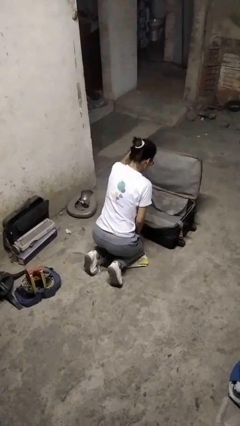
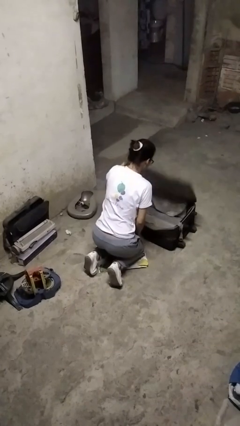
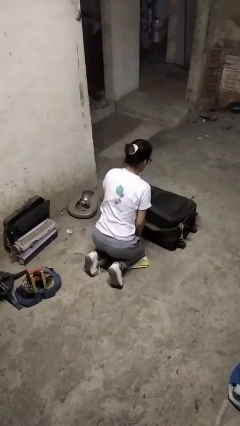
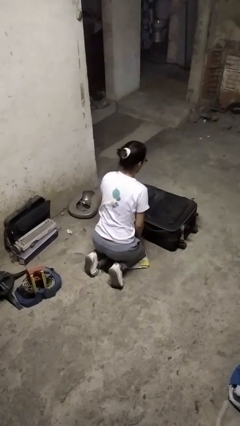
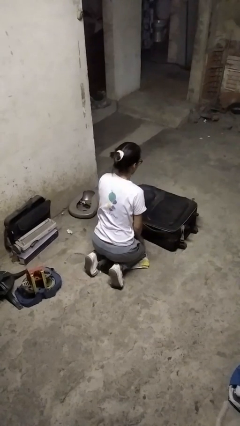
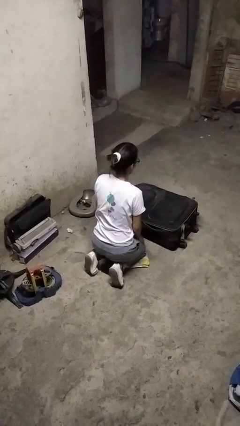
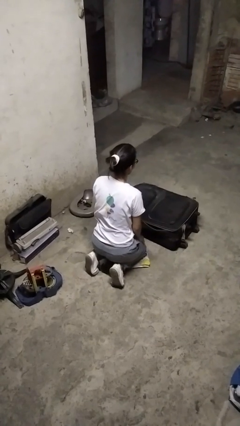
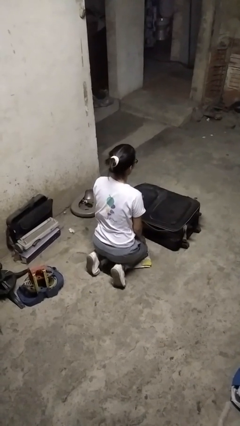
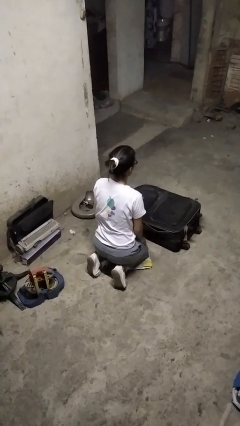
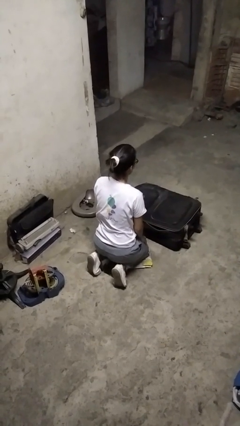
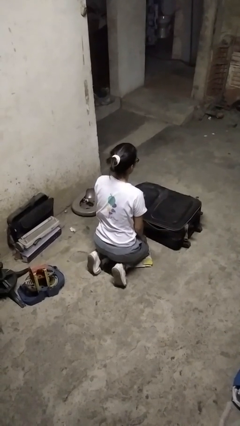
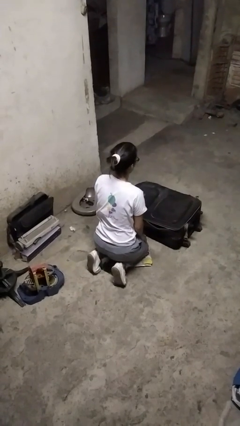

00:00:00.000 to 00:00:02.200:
person closes suitcase

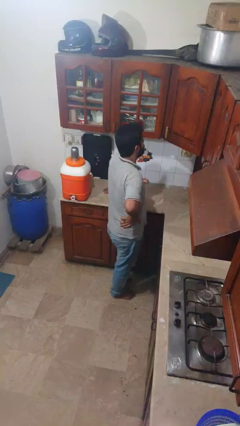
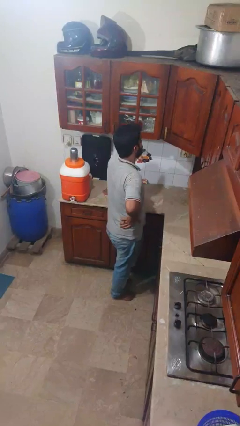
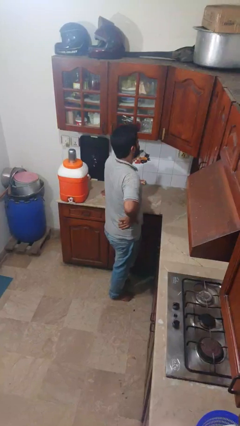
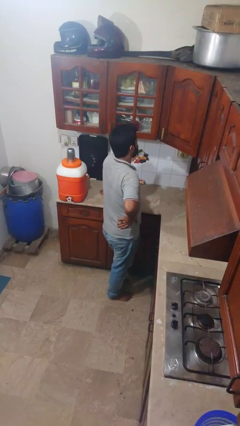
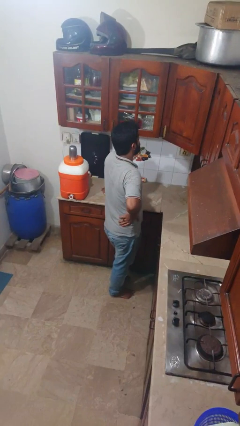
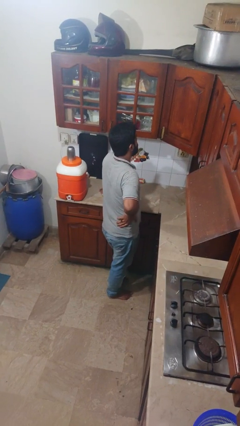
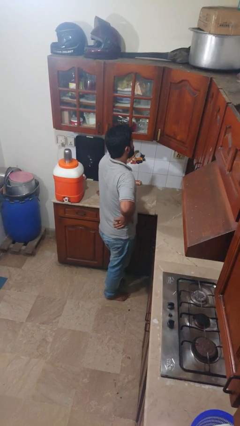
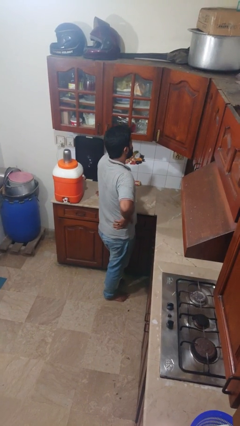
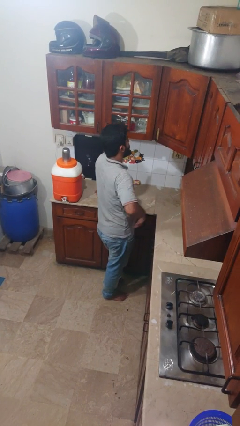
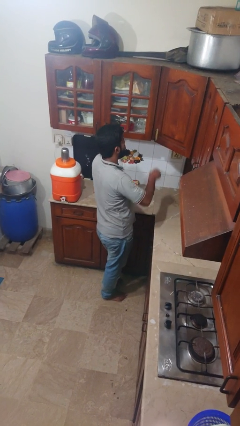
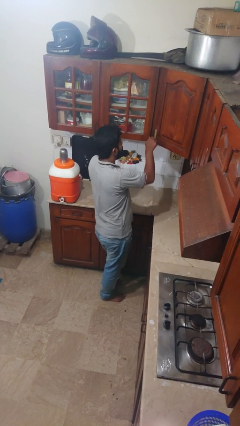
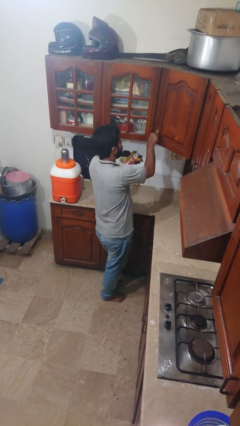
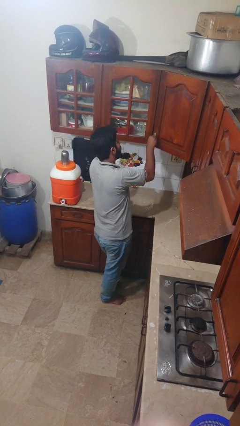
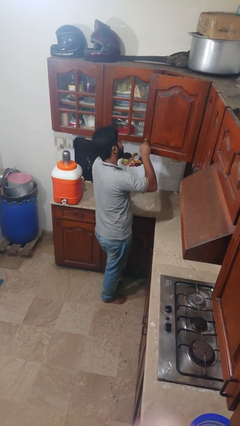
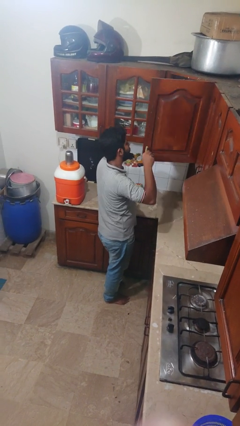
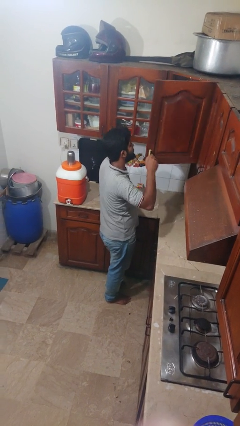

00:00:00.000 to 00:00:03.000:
person closes cabinet

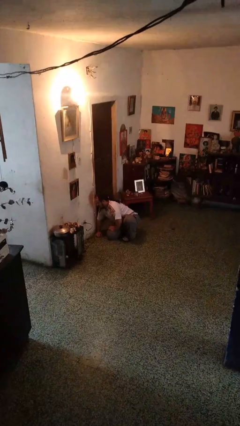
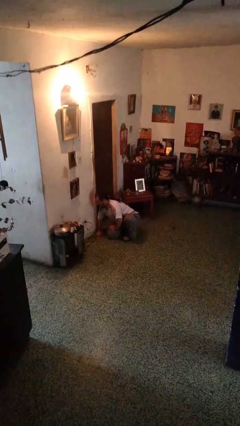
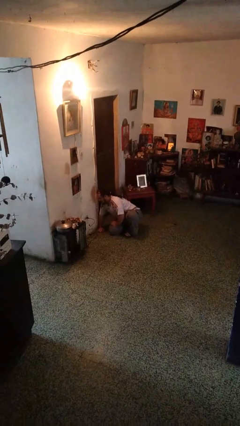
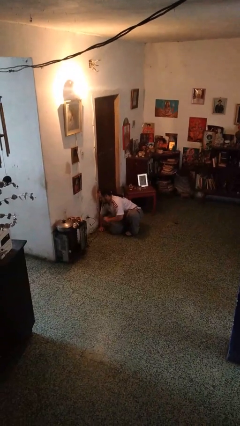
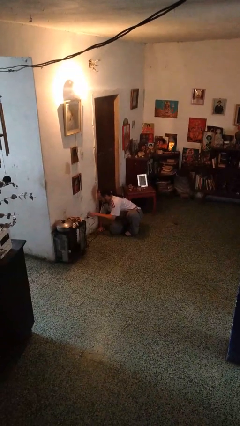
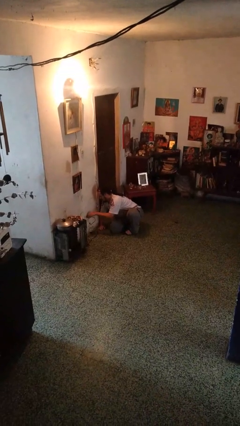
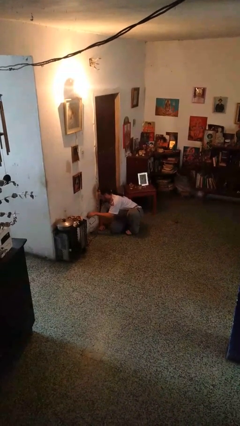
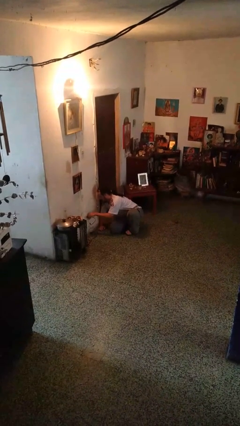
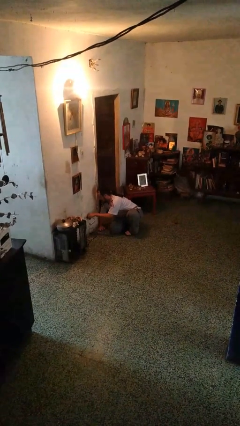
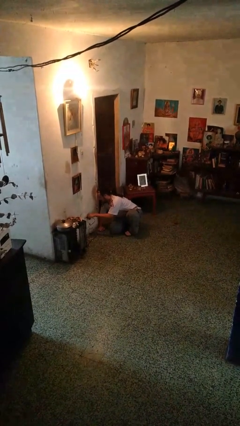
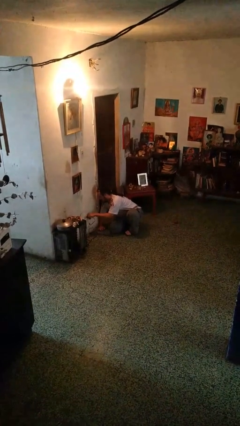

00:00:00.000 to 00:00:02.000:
person unplugs from electrical socket

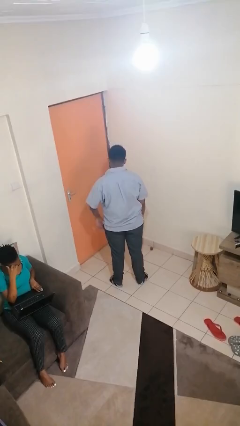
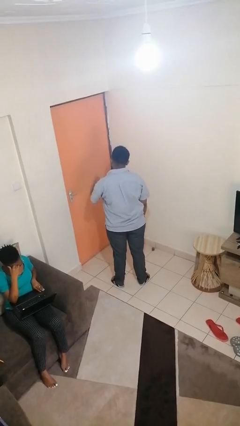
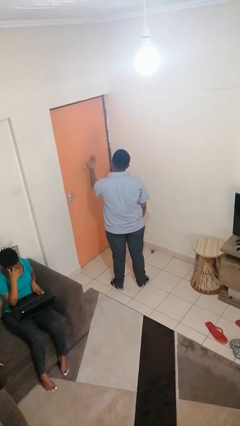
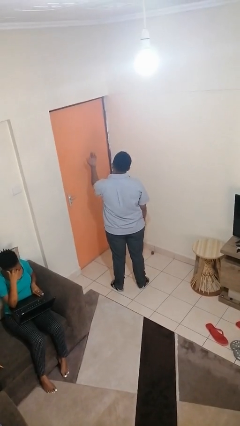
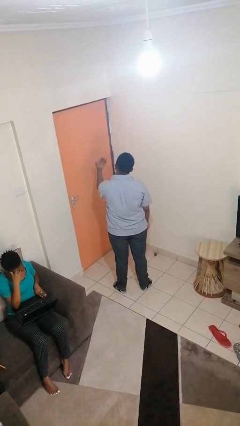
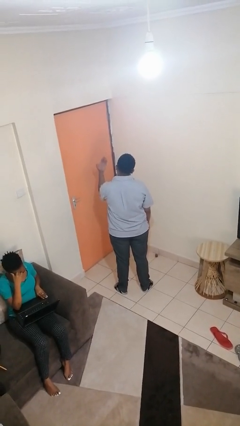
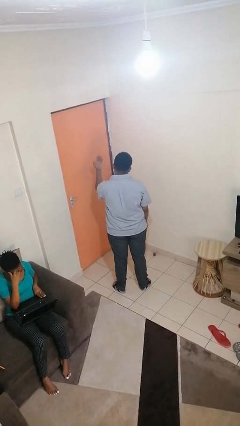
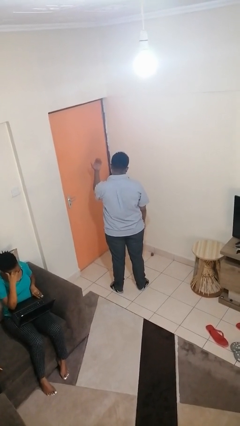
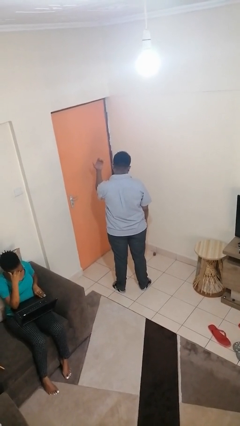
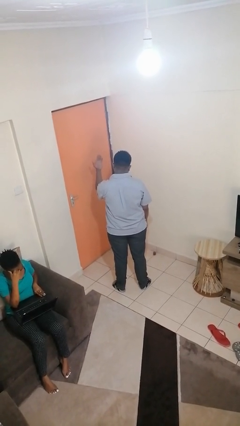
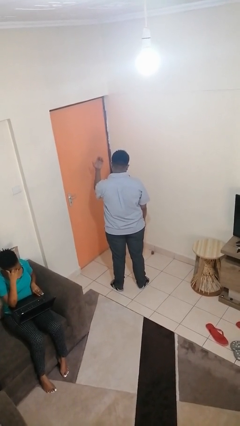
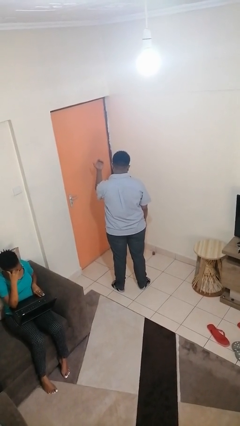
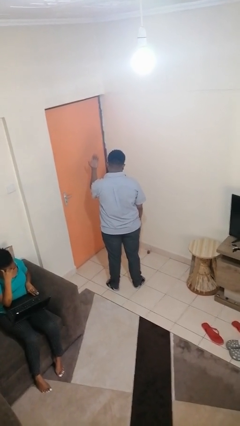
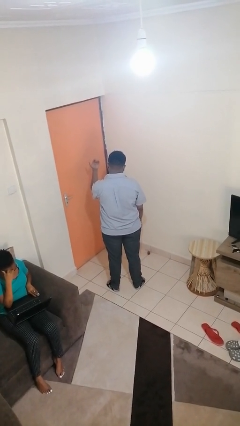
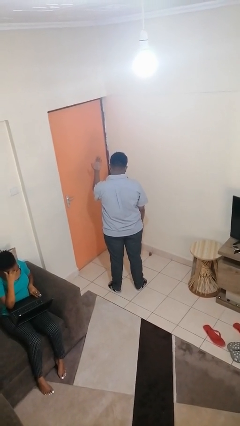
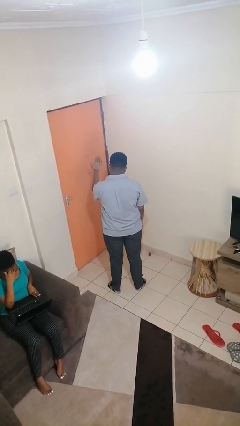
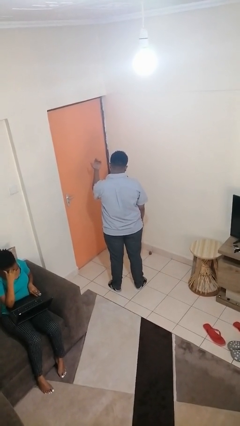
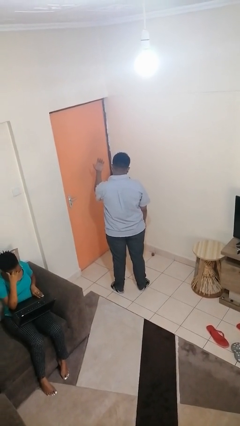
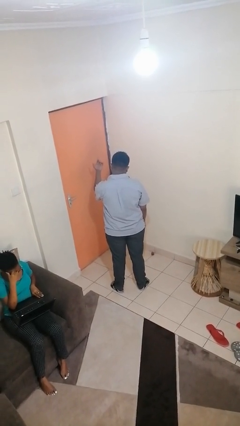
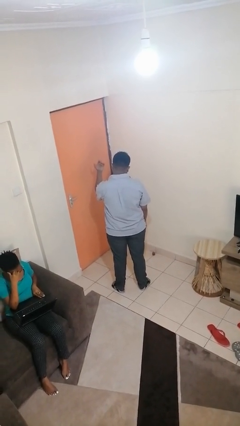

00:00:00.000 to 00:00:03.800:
person gestures come here

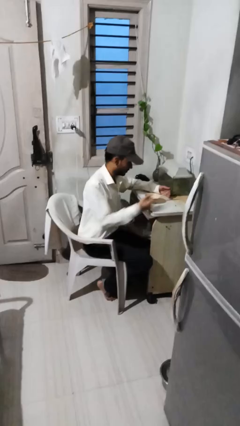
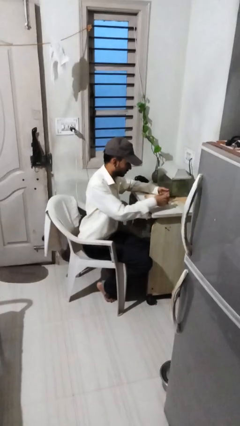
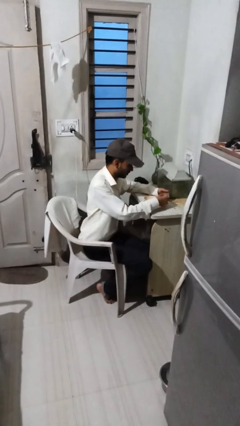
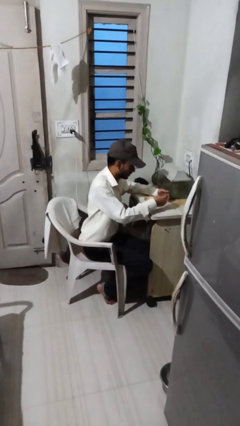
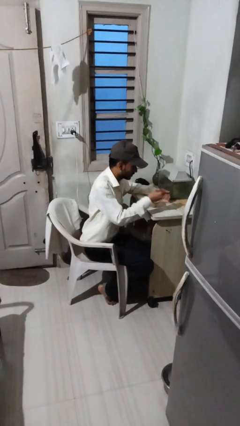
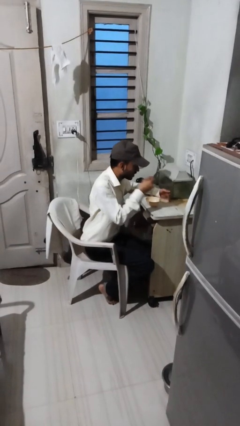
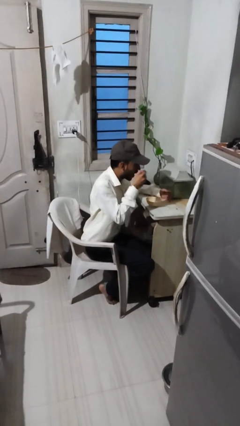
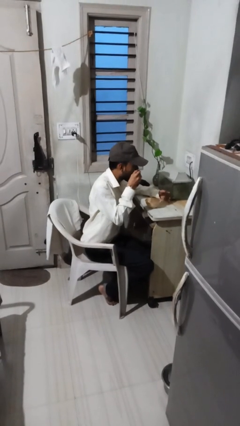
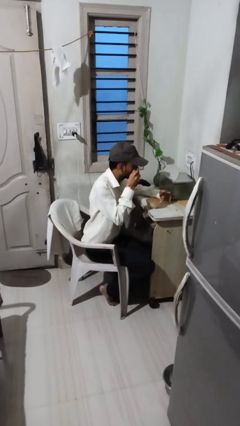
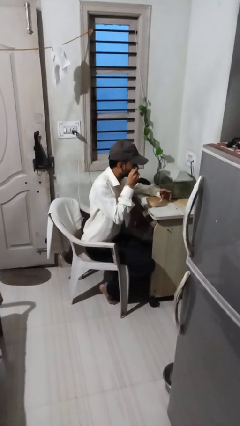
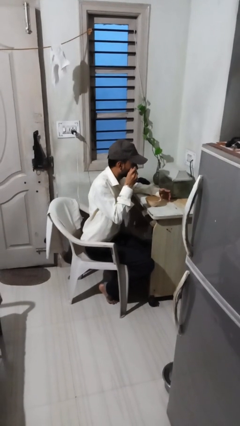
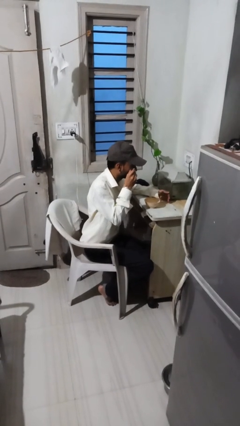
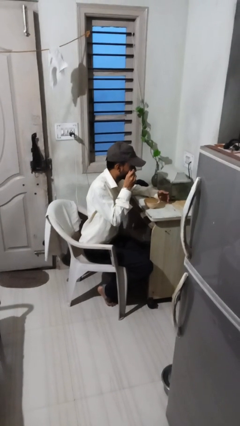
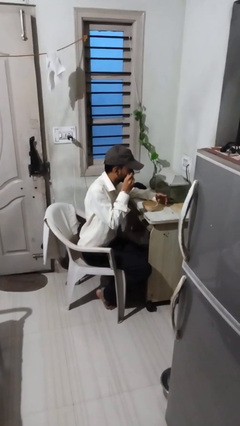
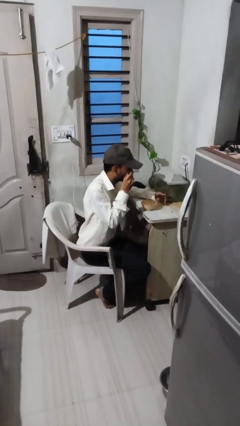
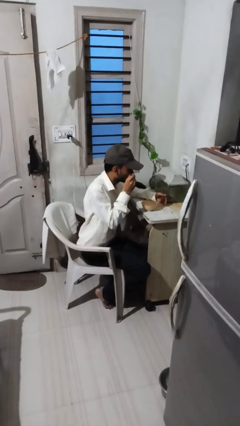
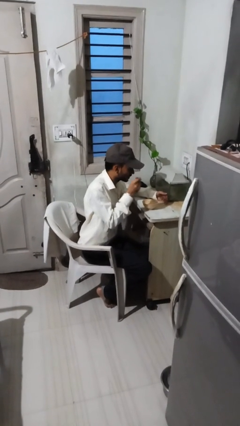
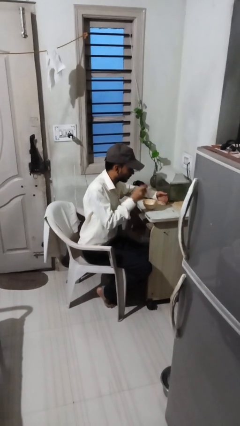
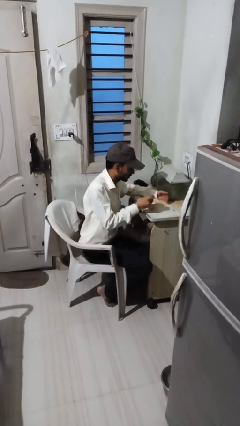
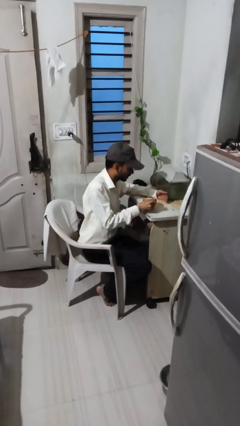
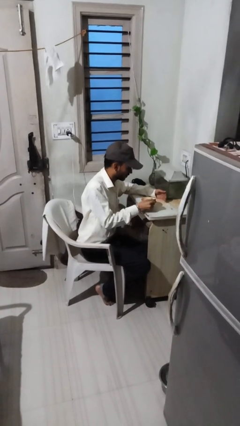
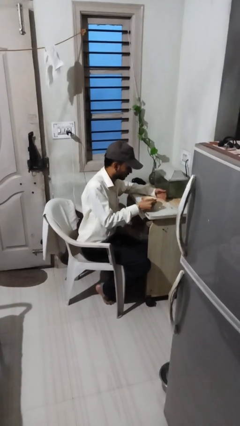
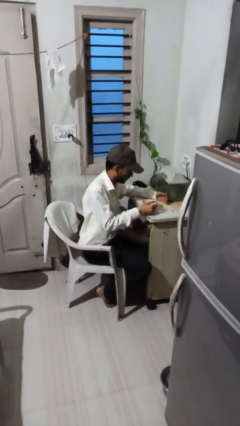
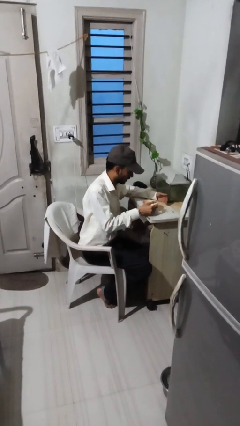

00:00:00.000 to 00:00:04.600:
person eats with utensil

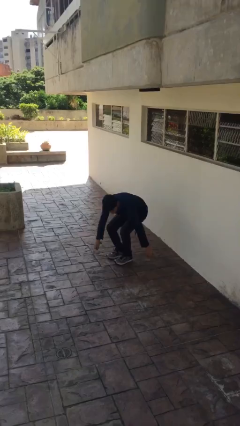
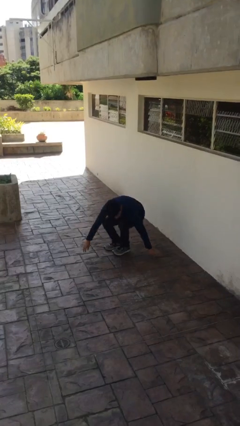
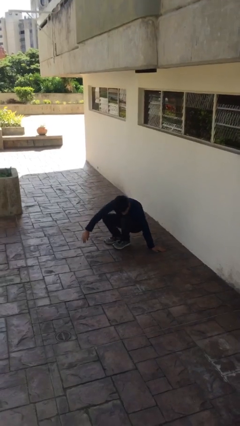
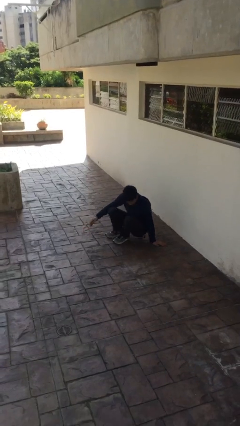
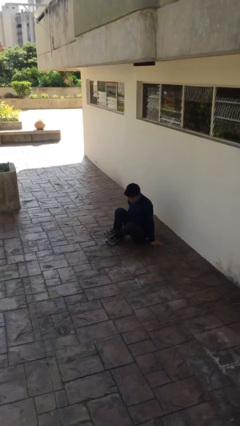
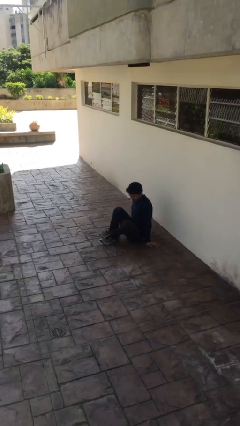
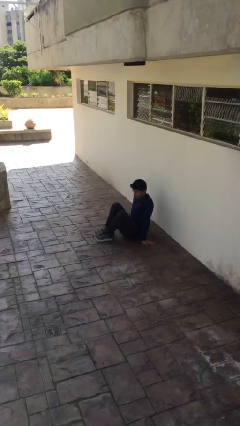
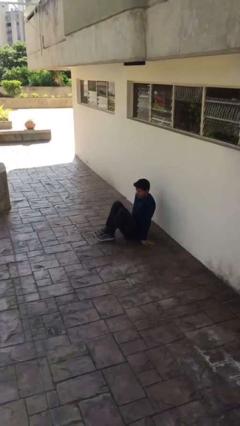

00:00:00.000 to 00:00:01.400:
person sits down

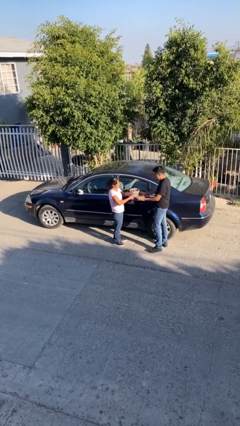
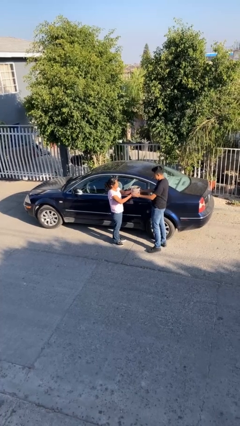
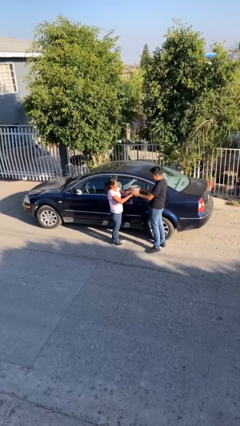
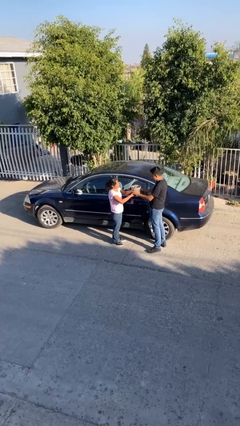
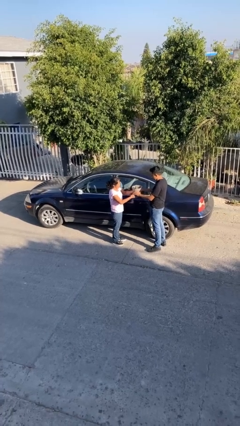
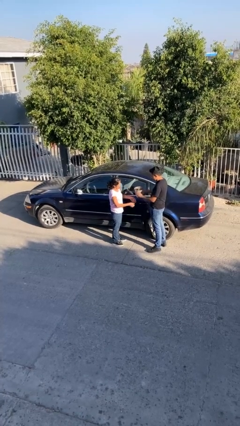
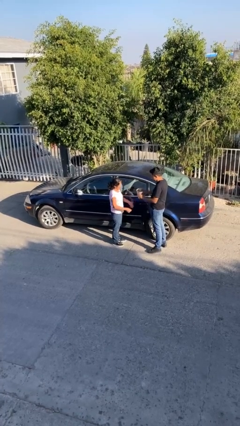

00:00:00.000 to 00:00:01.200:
person transfers object to person
